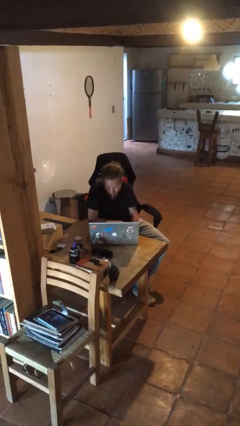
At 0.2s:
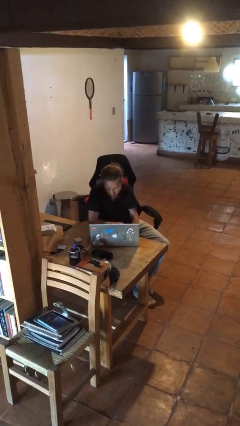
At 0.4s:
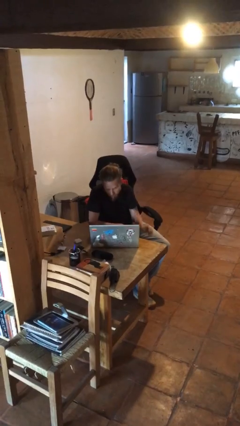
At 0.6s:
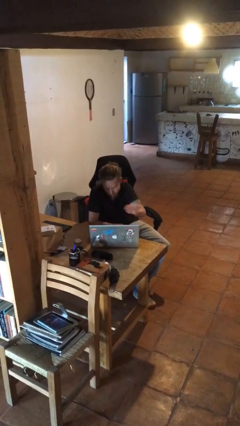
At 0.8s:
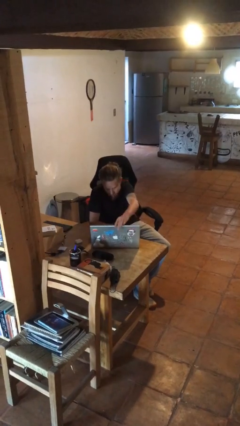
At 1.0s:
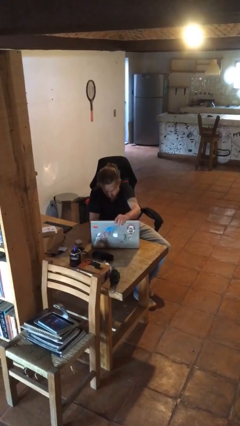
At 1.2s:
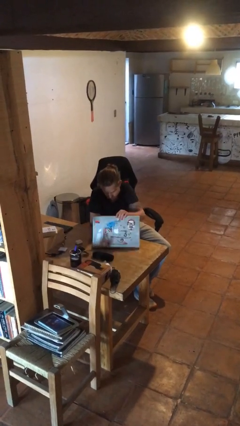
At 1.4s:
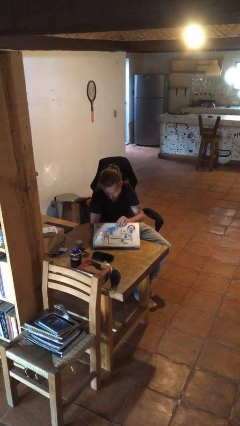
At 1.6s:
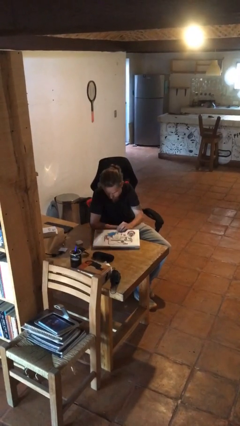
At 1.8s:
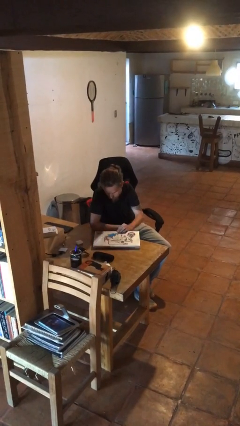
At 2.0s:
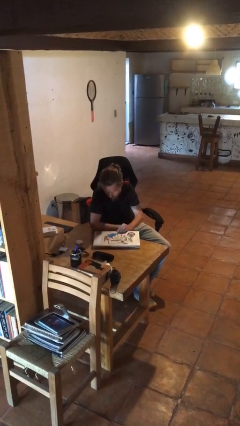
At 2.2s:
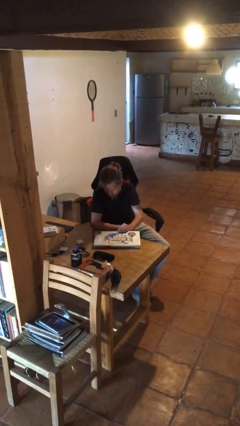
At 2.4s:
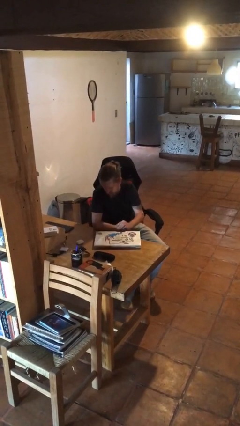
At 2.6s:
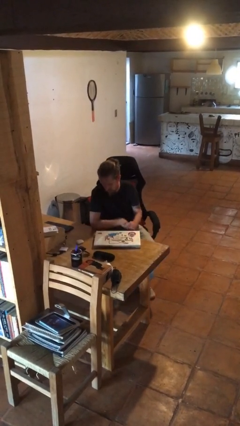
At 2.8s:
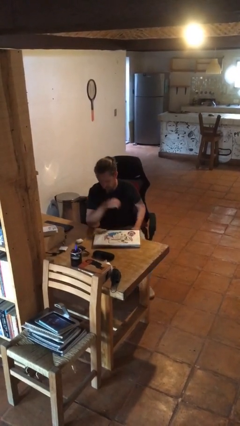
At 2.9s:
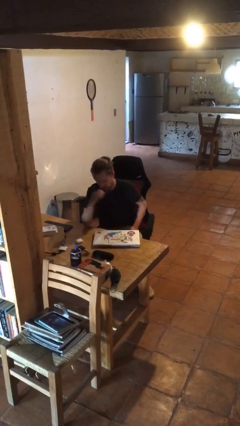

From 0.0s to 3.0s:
person closes laptop

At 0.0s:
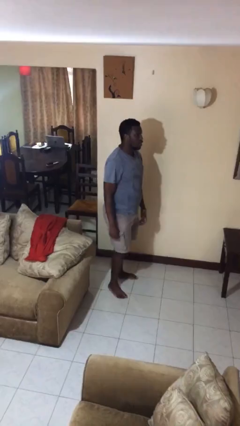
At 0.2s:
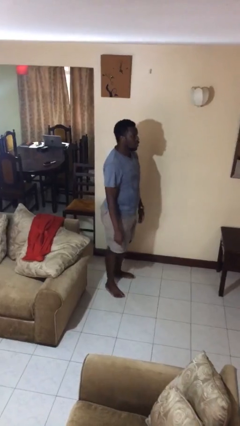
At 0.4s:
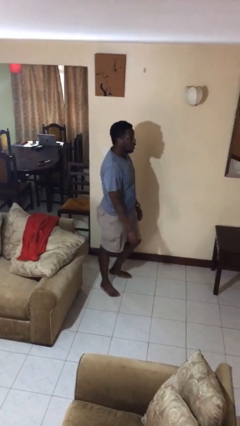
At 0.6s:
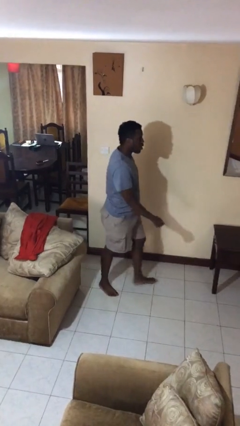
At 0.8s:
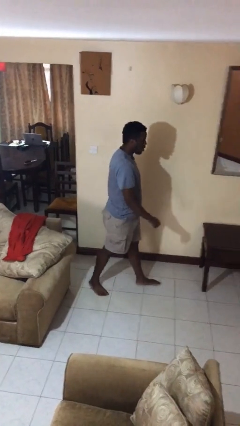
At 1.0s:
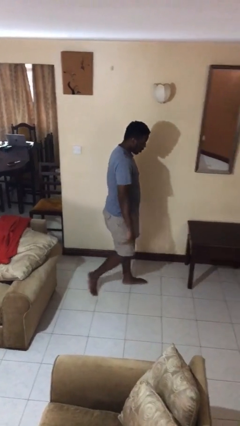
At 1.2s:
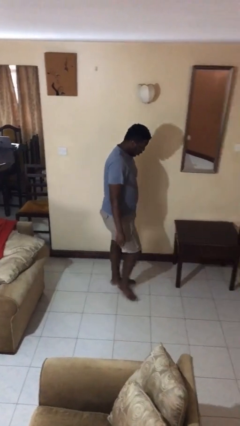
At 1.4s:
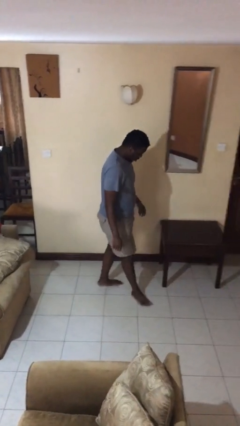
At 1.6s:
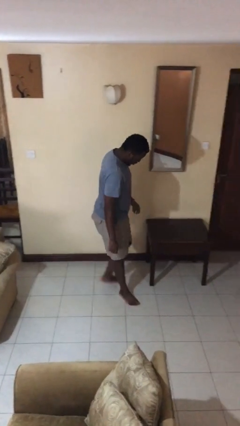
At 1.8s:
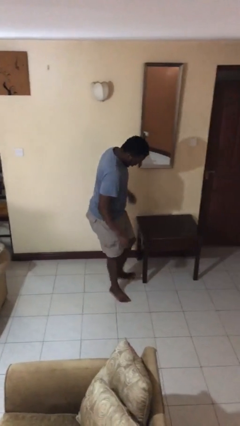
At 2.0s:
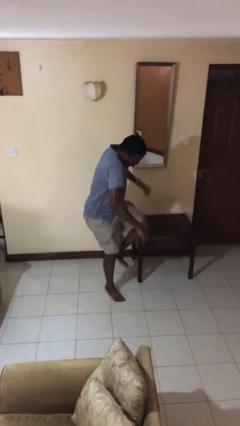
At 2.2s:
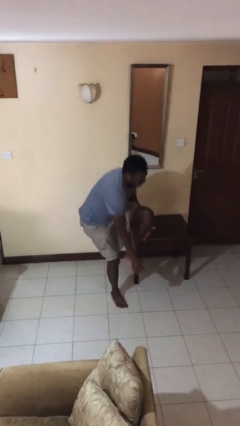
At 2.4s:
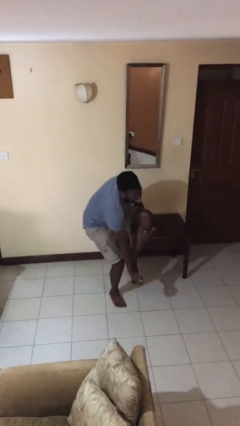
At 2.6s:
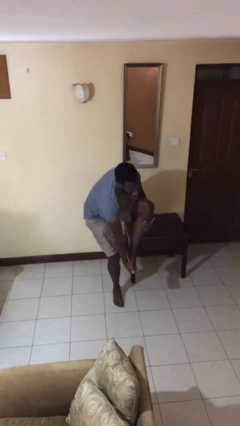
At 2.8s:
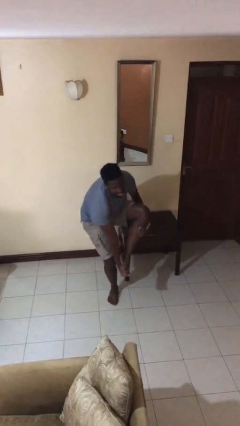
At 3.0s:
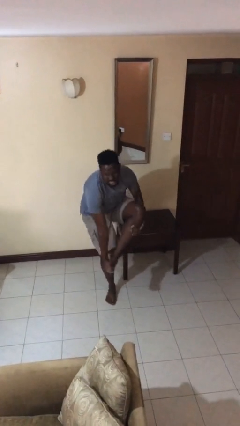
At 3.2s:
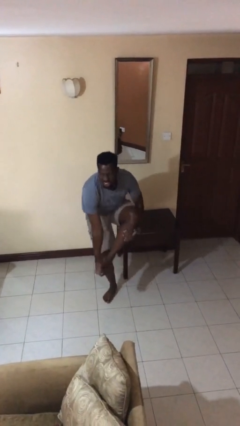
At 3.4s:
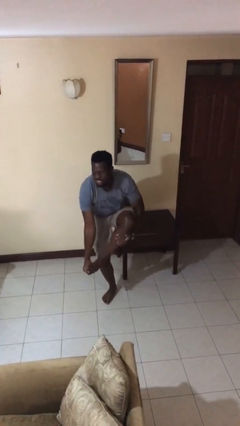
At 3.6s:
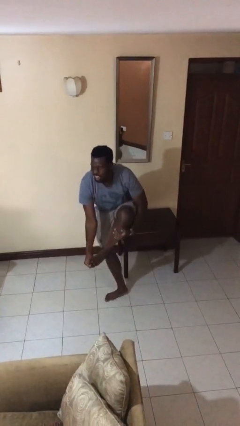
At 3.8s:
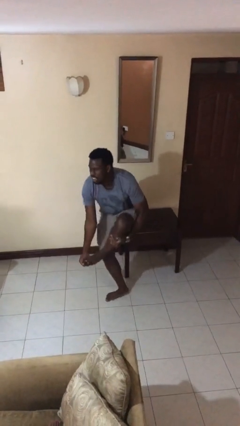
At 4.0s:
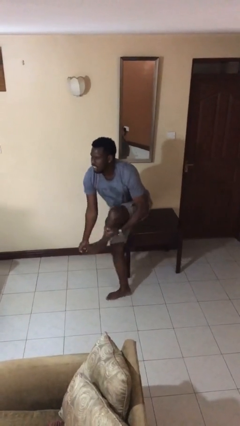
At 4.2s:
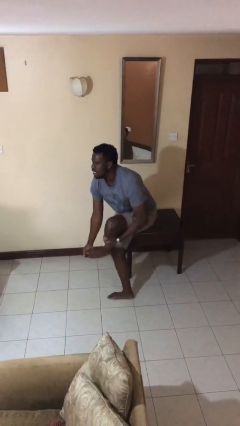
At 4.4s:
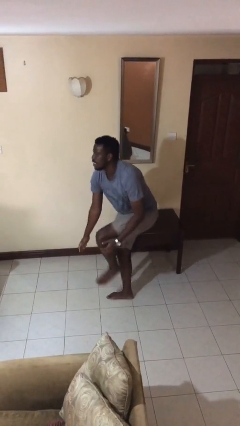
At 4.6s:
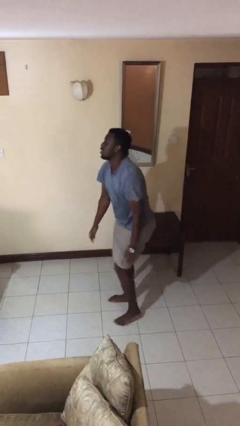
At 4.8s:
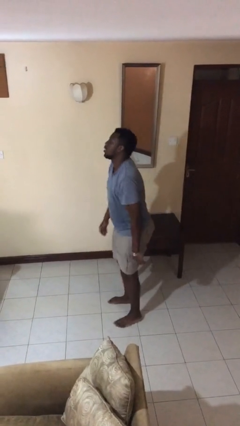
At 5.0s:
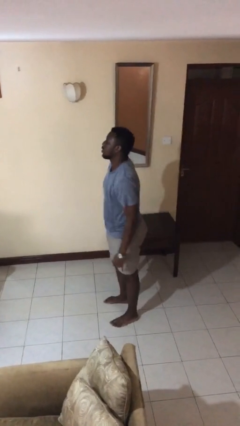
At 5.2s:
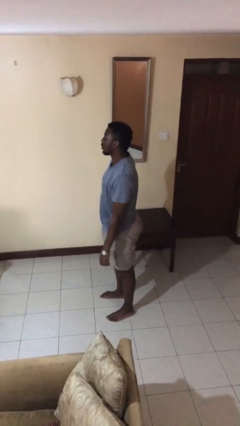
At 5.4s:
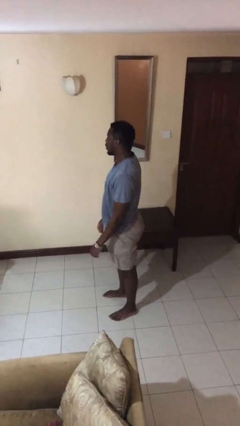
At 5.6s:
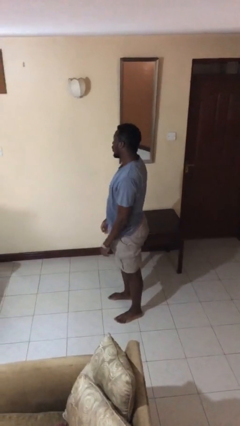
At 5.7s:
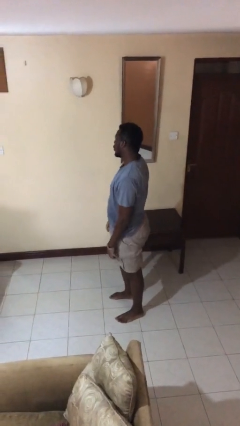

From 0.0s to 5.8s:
person stubs toe

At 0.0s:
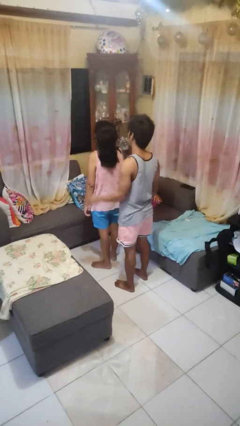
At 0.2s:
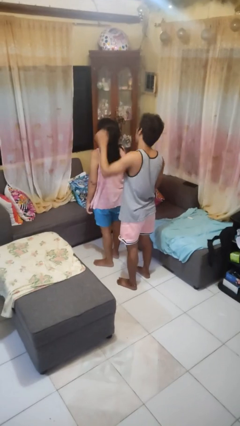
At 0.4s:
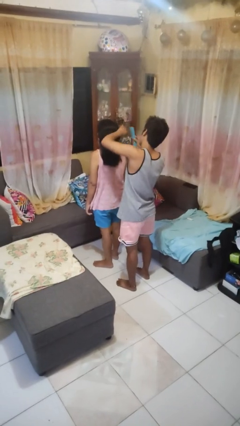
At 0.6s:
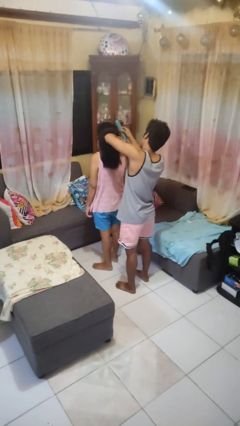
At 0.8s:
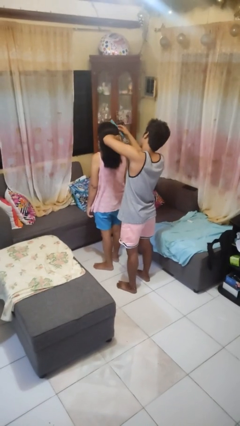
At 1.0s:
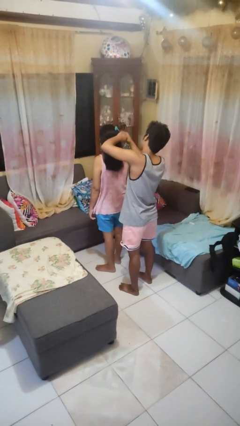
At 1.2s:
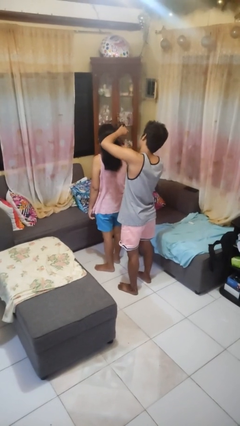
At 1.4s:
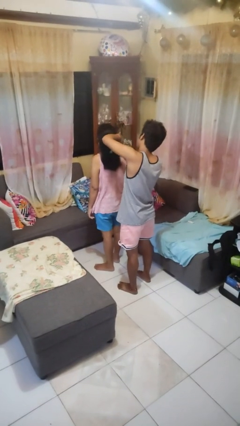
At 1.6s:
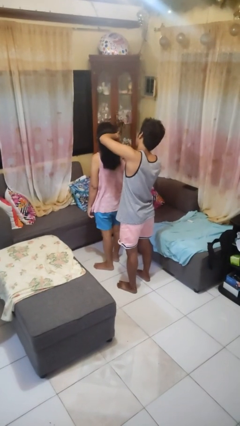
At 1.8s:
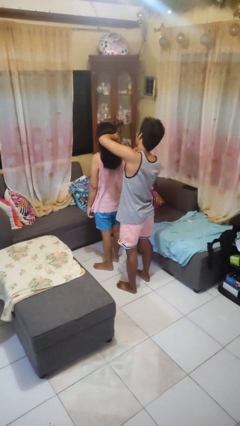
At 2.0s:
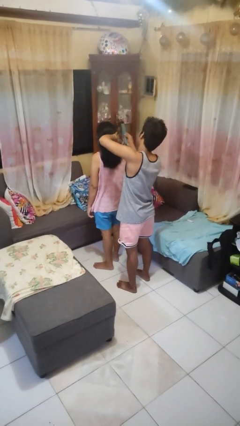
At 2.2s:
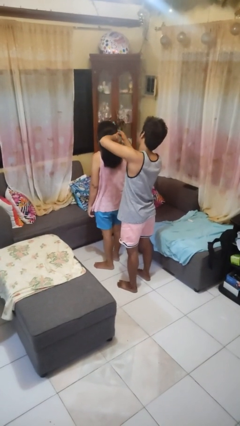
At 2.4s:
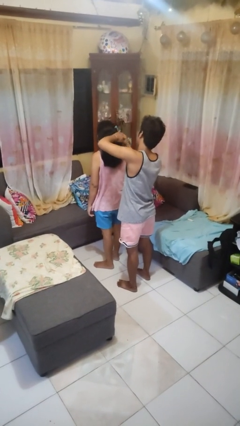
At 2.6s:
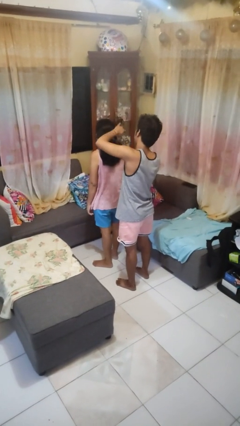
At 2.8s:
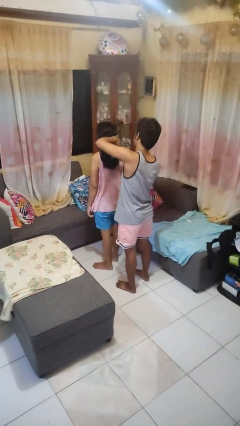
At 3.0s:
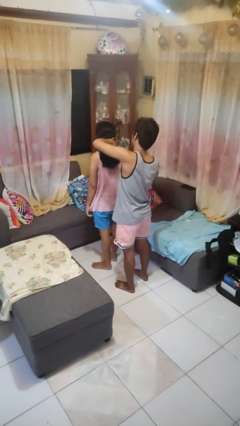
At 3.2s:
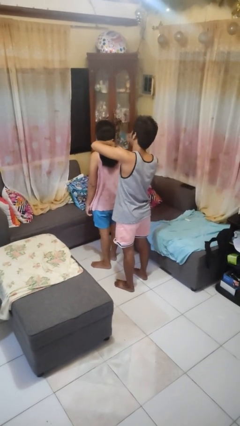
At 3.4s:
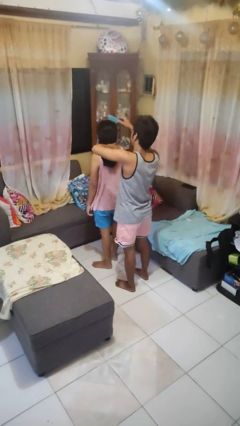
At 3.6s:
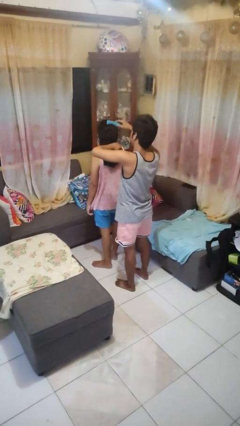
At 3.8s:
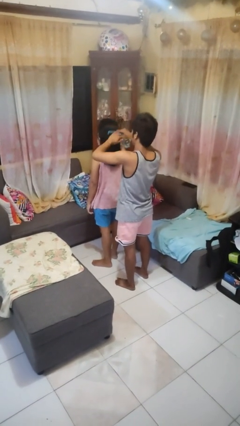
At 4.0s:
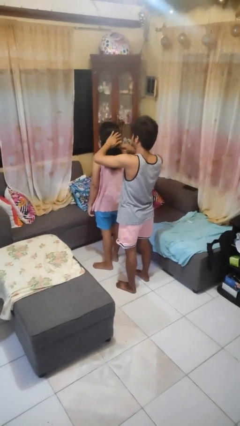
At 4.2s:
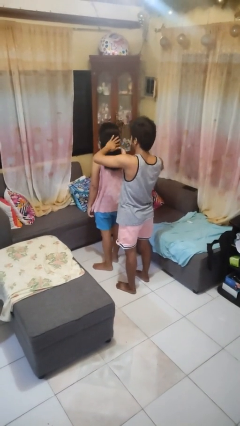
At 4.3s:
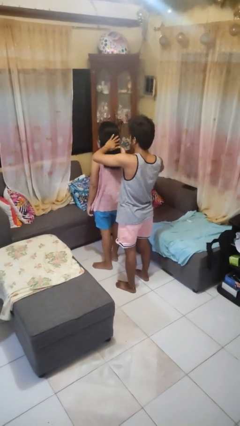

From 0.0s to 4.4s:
person brushes hair of person

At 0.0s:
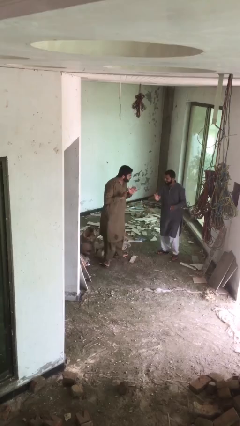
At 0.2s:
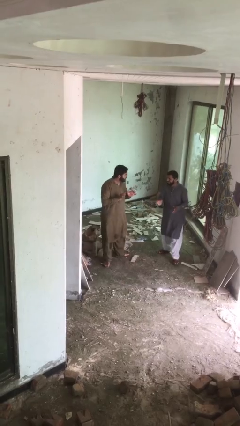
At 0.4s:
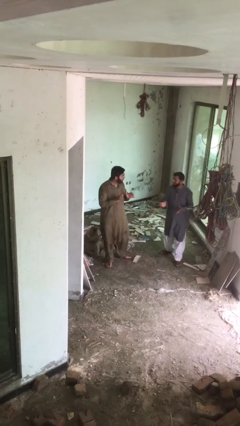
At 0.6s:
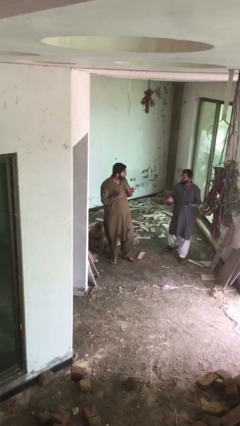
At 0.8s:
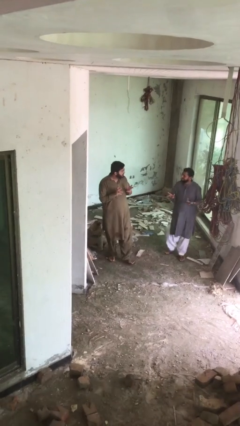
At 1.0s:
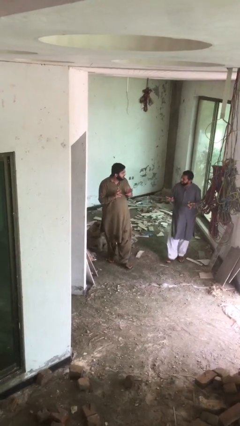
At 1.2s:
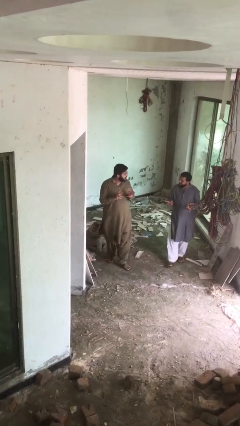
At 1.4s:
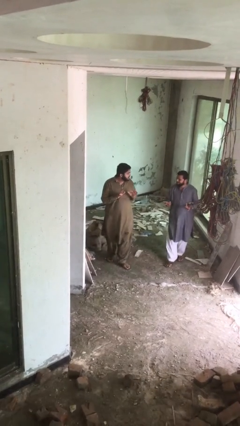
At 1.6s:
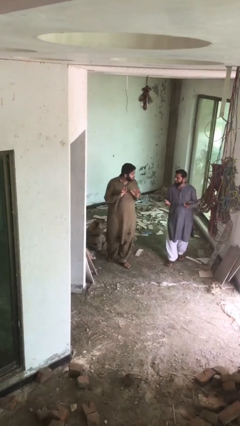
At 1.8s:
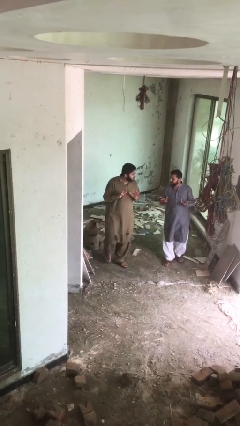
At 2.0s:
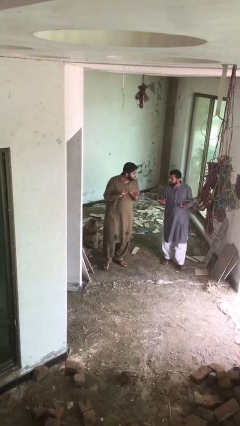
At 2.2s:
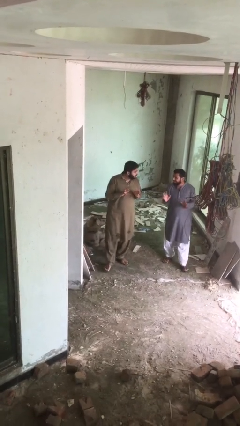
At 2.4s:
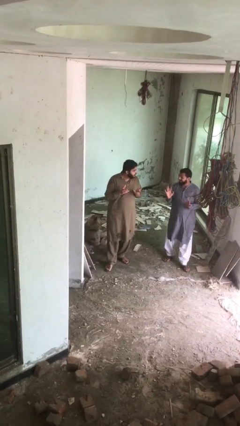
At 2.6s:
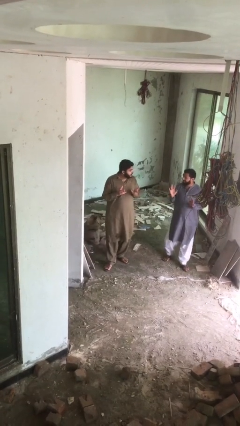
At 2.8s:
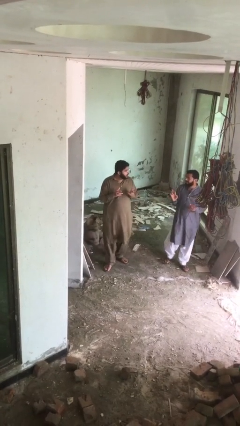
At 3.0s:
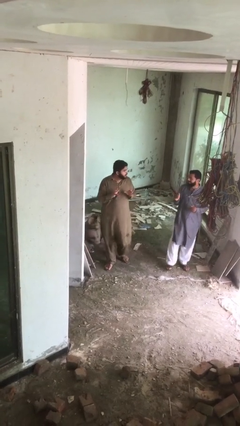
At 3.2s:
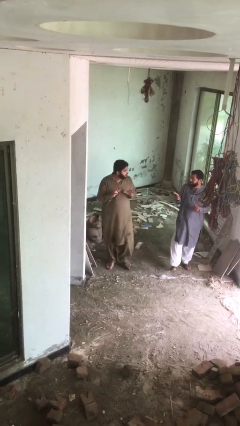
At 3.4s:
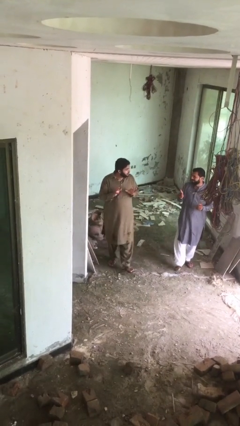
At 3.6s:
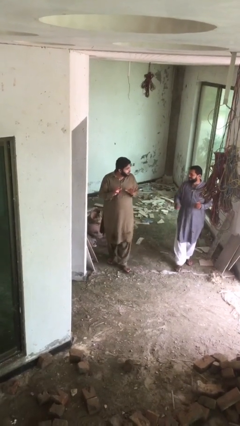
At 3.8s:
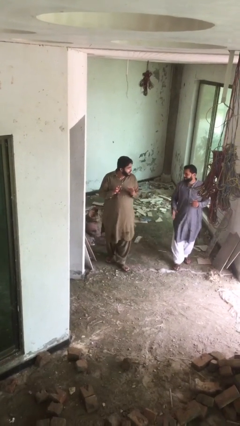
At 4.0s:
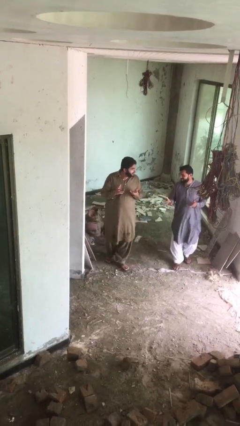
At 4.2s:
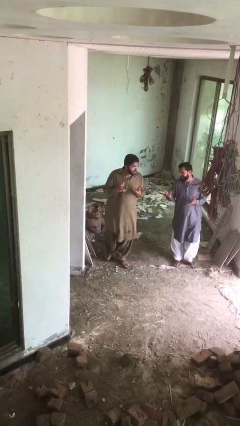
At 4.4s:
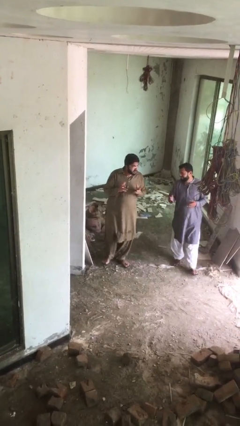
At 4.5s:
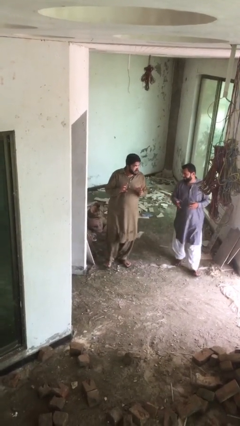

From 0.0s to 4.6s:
person talks to person
